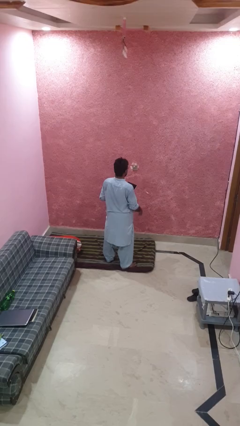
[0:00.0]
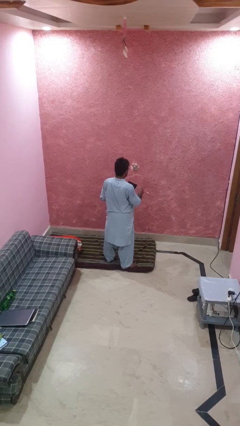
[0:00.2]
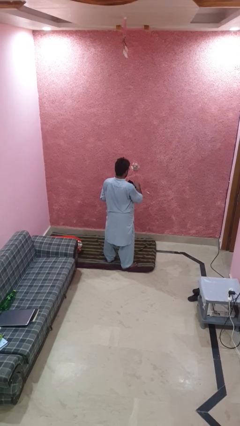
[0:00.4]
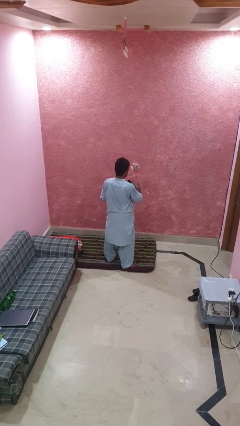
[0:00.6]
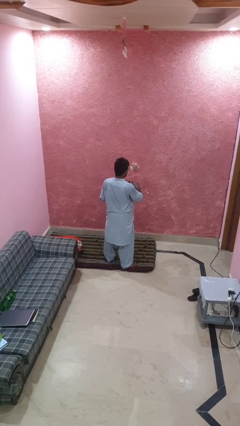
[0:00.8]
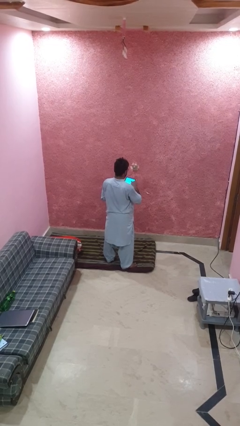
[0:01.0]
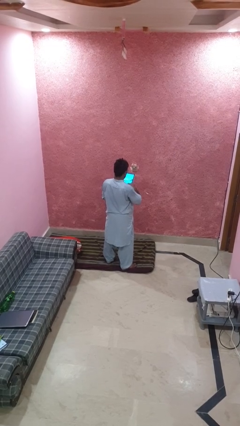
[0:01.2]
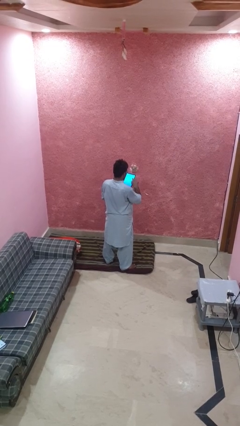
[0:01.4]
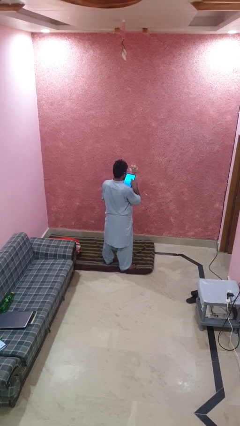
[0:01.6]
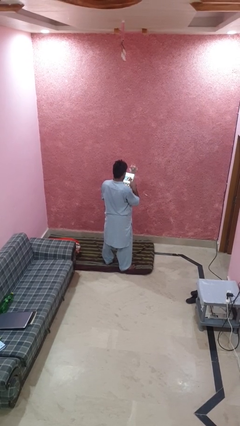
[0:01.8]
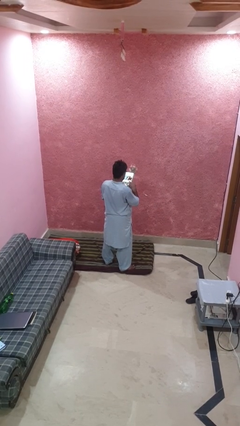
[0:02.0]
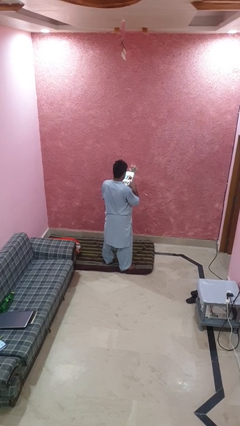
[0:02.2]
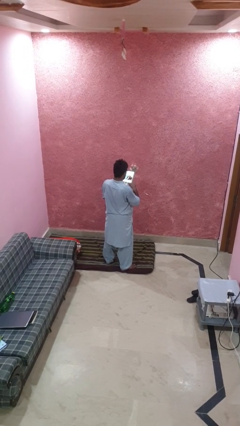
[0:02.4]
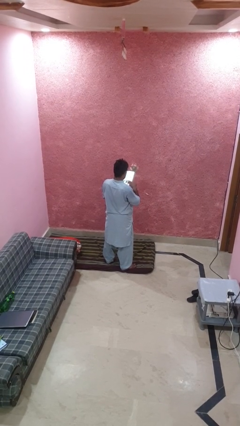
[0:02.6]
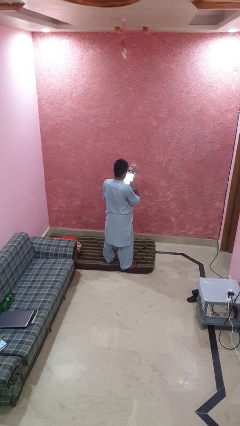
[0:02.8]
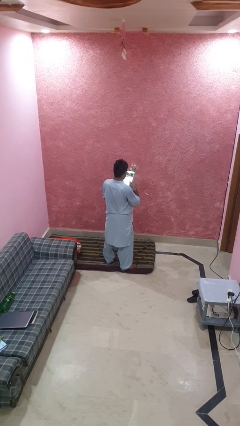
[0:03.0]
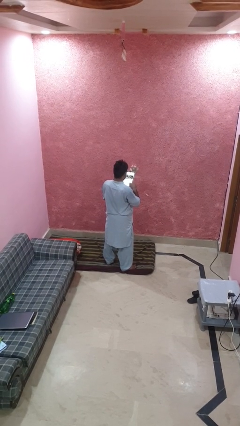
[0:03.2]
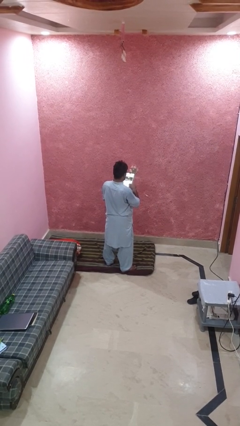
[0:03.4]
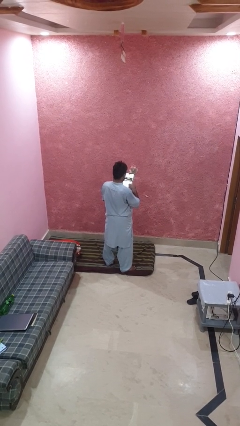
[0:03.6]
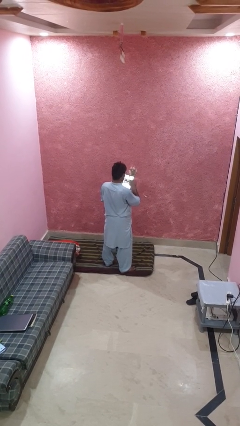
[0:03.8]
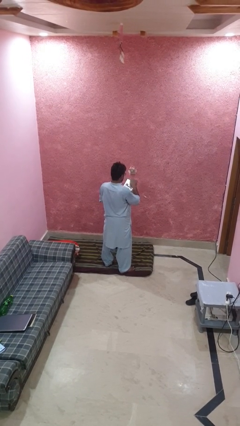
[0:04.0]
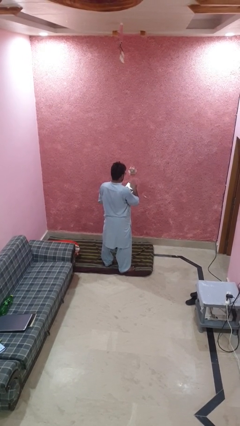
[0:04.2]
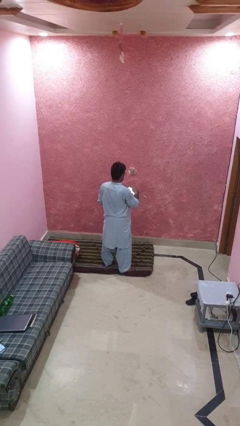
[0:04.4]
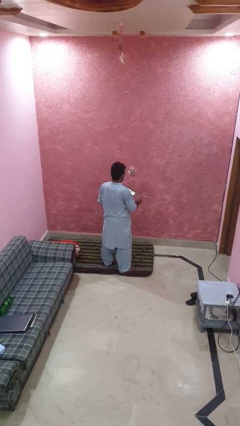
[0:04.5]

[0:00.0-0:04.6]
person interacts with tablet

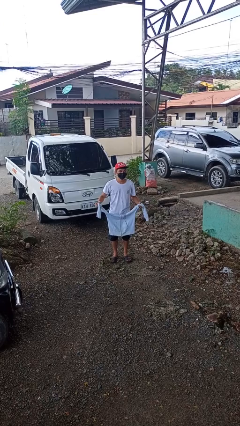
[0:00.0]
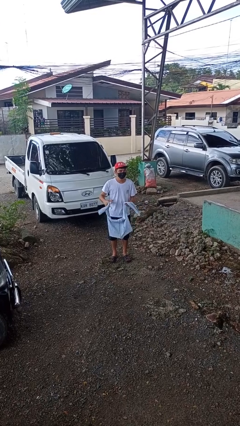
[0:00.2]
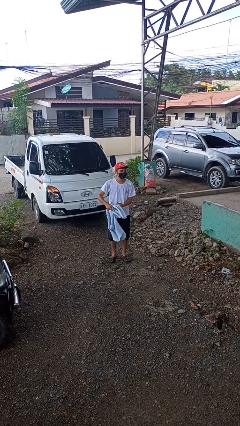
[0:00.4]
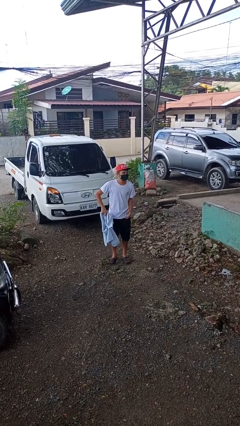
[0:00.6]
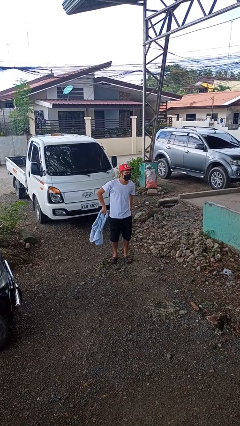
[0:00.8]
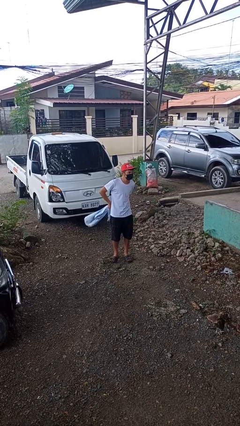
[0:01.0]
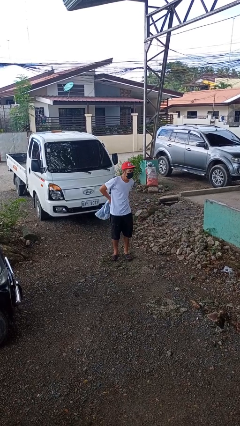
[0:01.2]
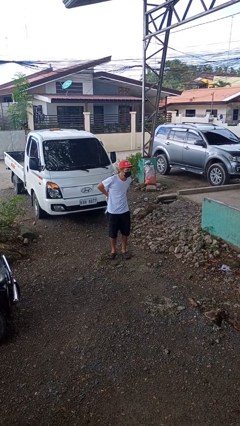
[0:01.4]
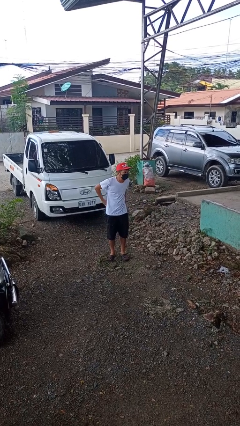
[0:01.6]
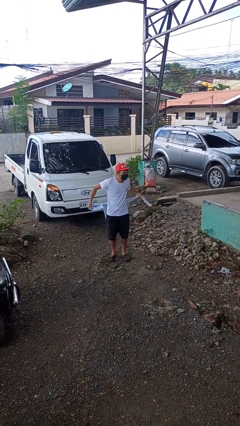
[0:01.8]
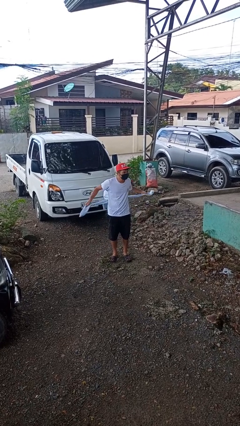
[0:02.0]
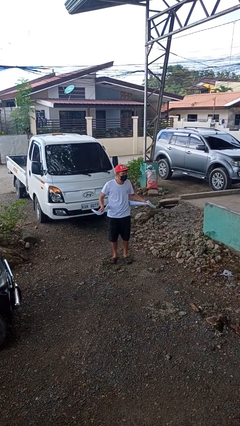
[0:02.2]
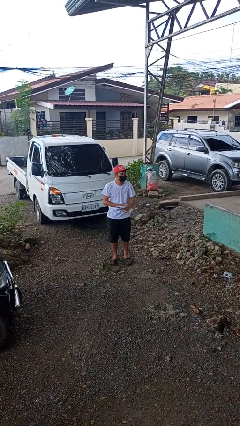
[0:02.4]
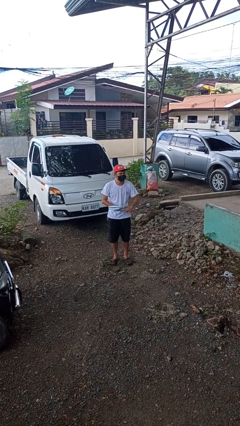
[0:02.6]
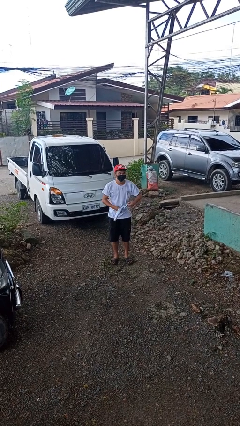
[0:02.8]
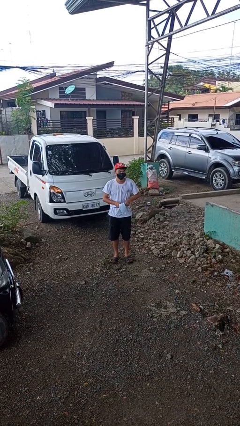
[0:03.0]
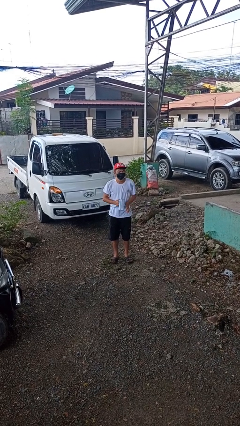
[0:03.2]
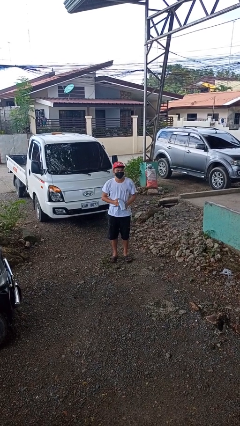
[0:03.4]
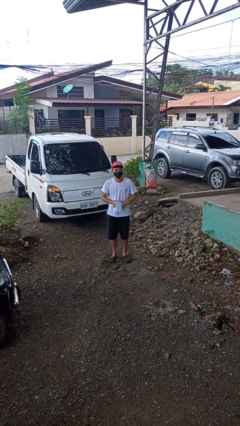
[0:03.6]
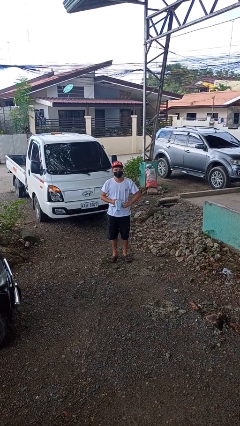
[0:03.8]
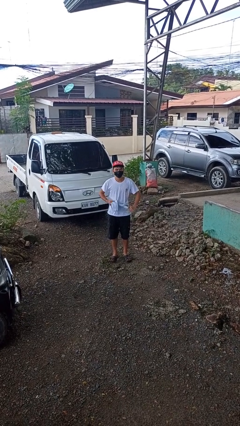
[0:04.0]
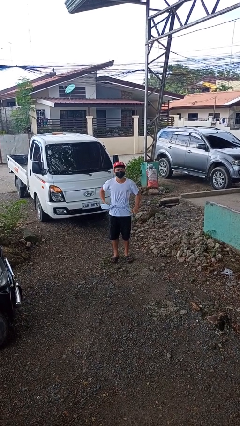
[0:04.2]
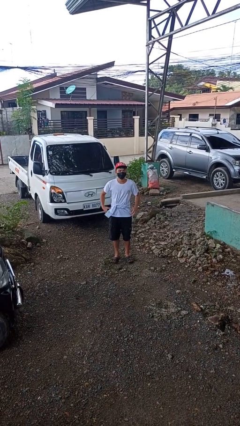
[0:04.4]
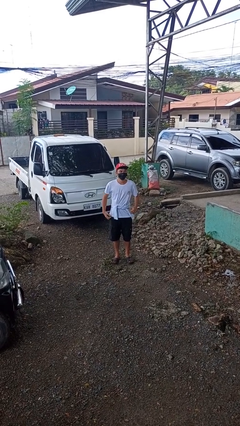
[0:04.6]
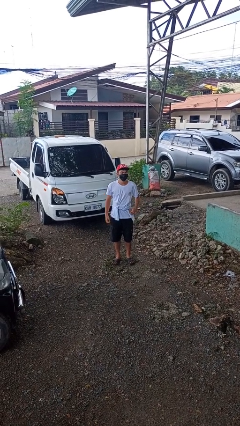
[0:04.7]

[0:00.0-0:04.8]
person ties jacket around waist

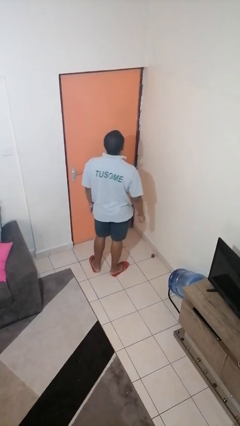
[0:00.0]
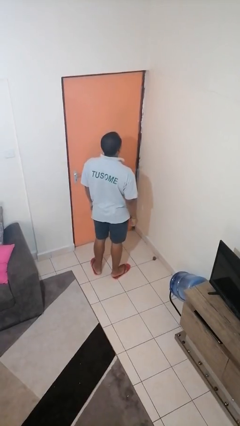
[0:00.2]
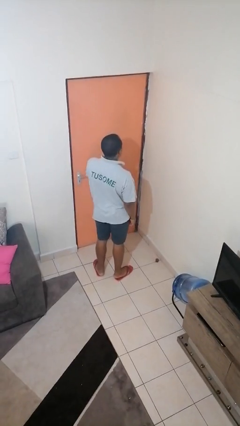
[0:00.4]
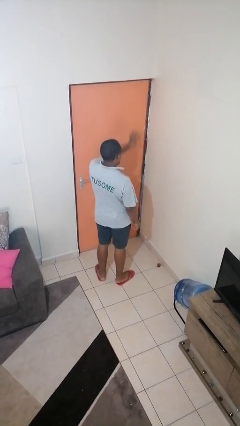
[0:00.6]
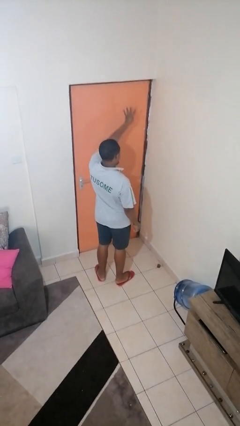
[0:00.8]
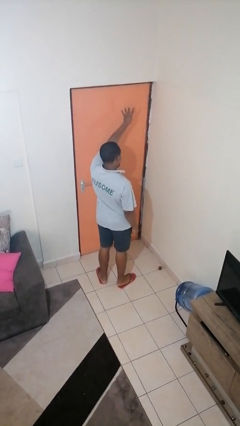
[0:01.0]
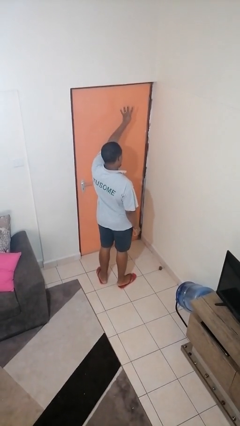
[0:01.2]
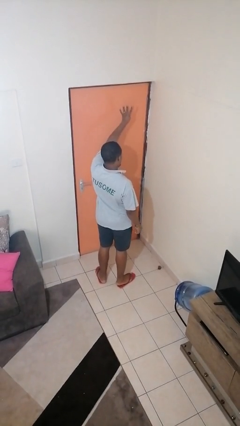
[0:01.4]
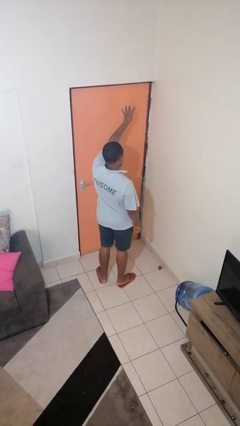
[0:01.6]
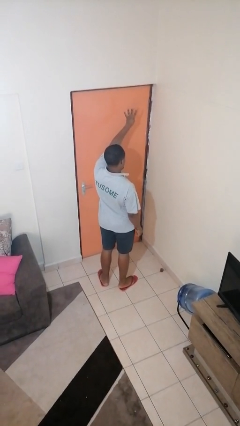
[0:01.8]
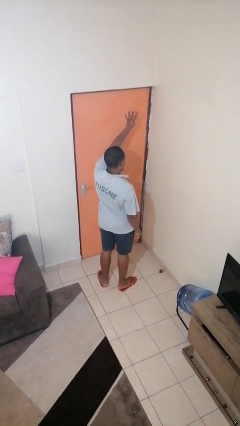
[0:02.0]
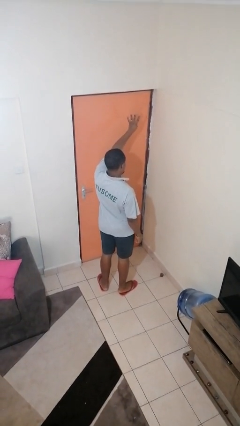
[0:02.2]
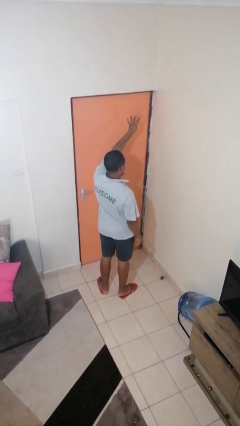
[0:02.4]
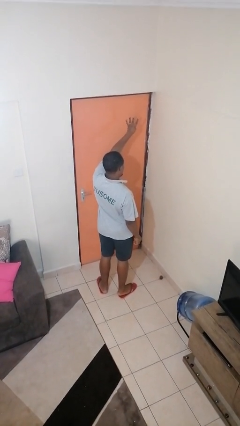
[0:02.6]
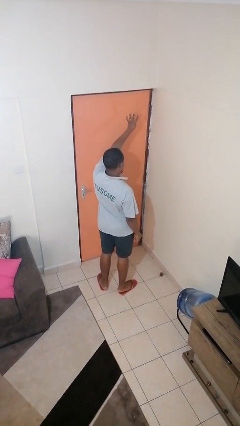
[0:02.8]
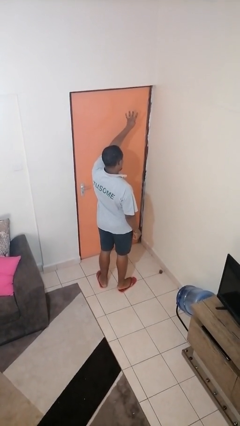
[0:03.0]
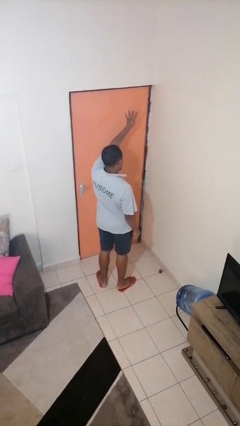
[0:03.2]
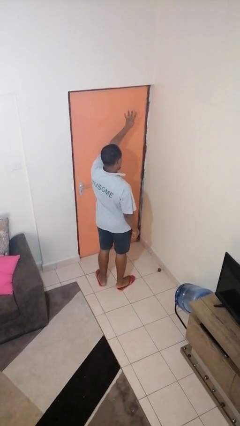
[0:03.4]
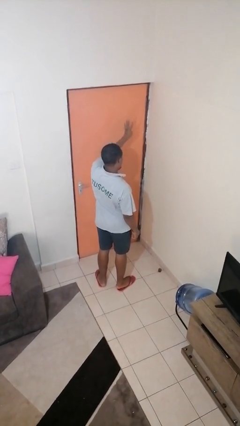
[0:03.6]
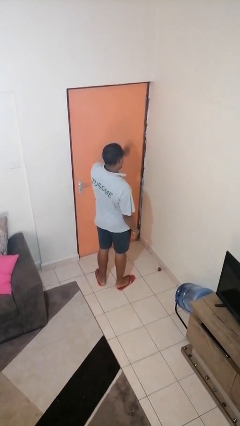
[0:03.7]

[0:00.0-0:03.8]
person gestures number four

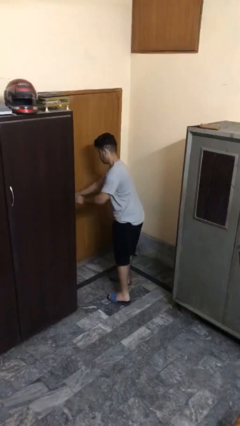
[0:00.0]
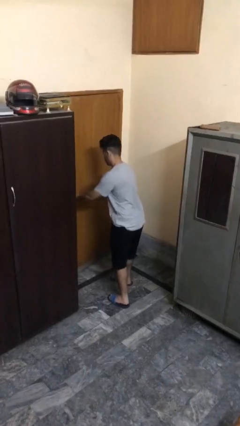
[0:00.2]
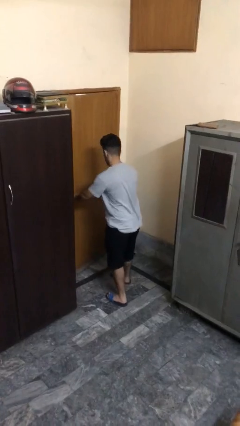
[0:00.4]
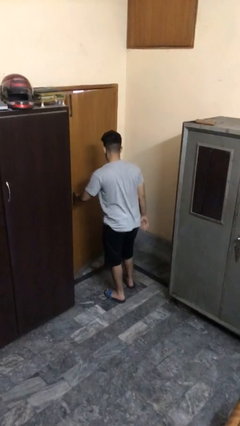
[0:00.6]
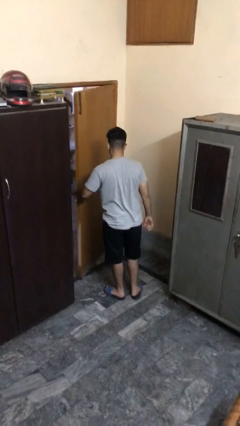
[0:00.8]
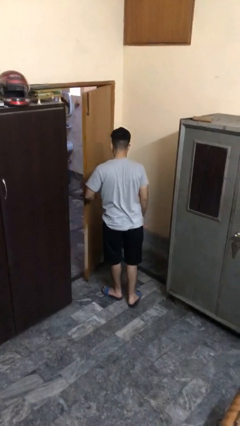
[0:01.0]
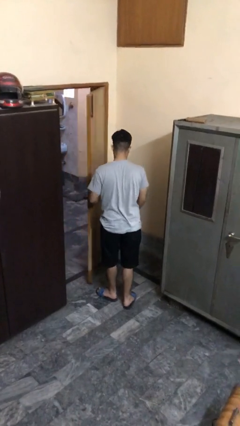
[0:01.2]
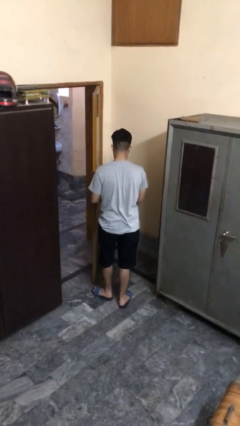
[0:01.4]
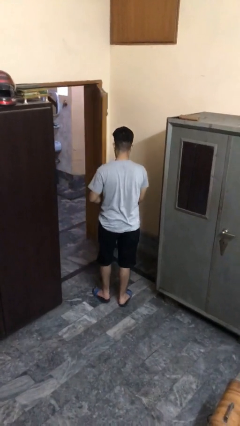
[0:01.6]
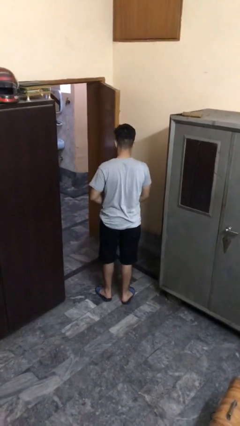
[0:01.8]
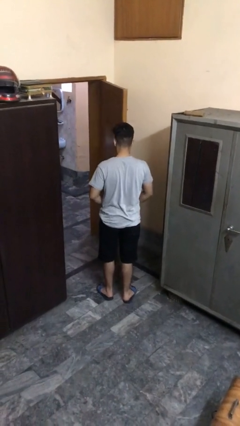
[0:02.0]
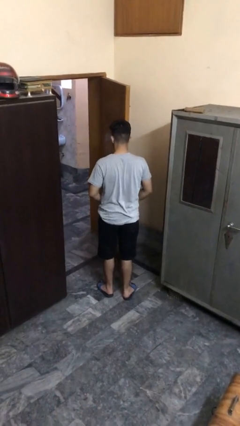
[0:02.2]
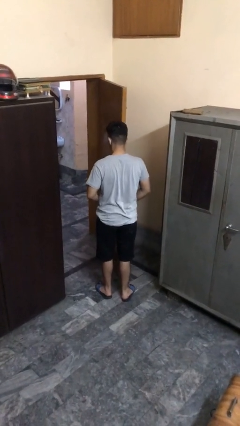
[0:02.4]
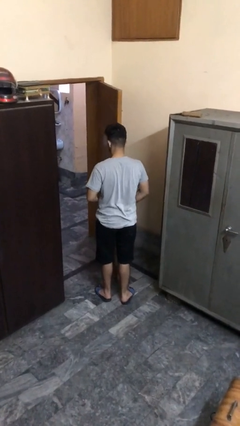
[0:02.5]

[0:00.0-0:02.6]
person opens facility door

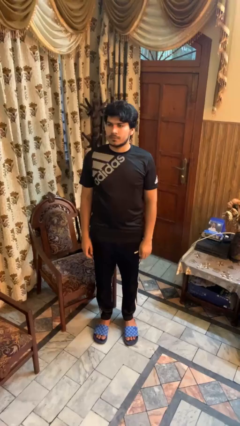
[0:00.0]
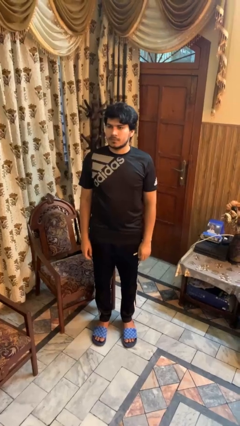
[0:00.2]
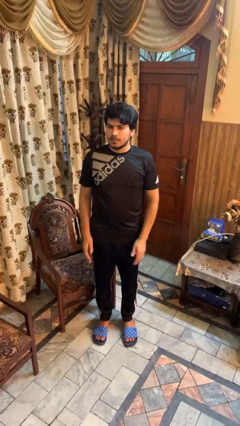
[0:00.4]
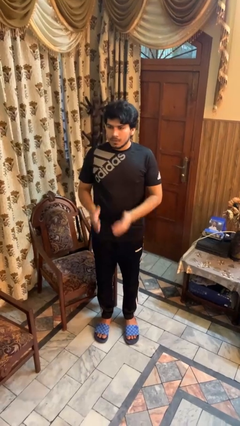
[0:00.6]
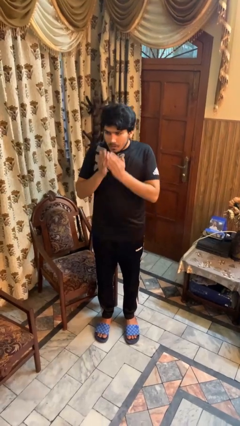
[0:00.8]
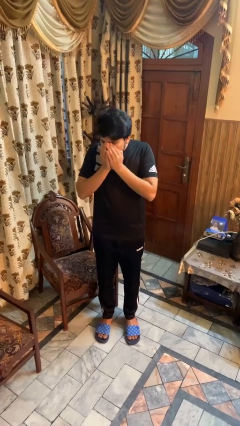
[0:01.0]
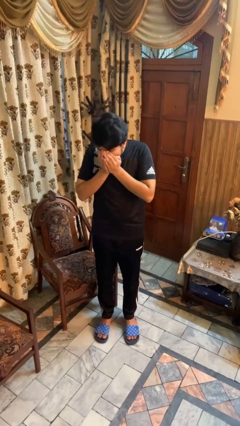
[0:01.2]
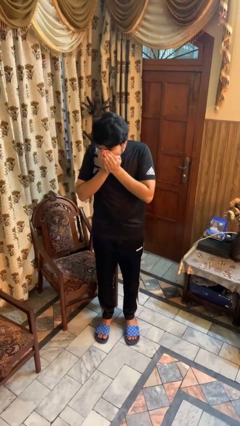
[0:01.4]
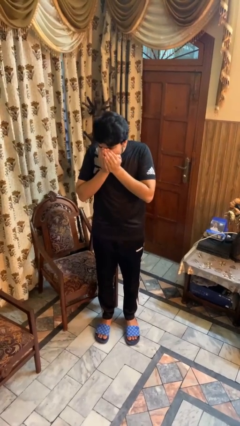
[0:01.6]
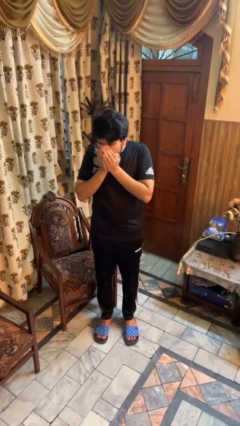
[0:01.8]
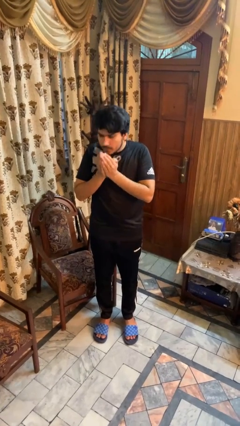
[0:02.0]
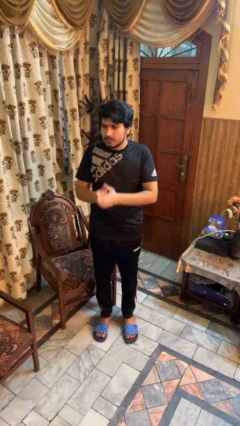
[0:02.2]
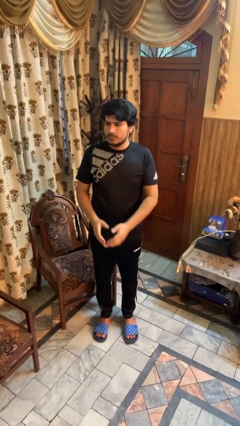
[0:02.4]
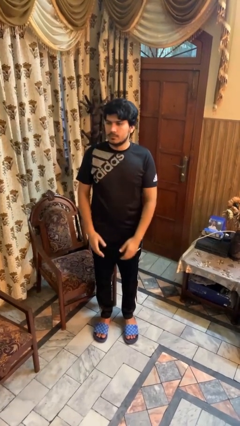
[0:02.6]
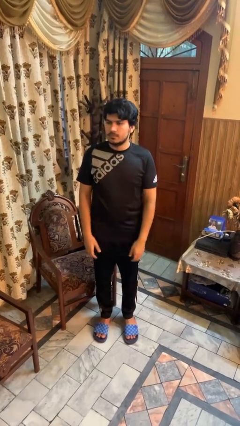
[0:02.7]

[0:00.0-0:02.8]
person sneezes into hand
